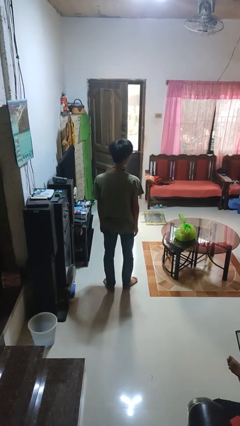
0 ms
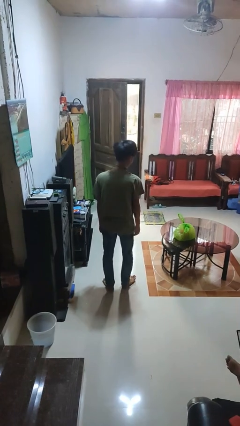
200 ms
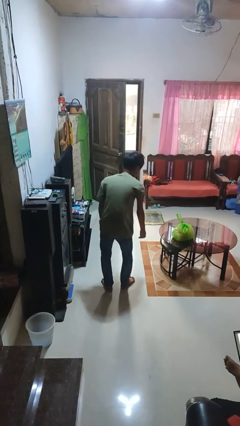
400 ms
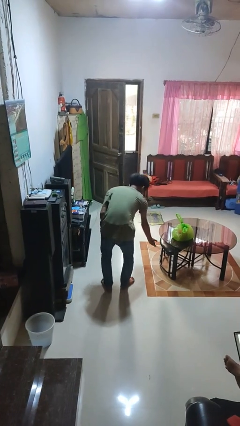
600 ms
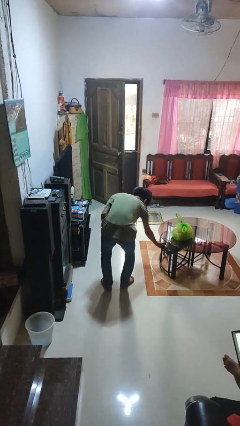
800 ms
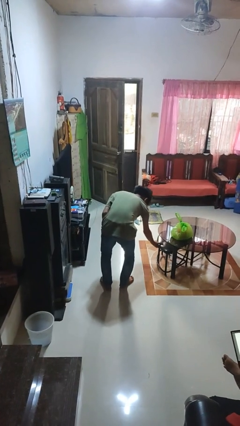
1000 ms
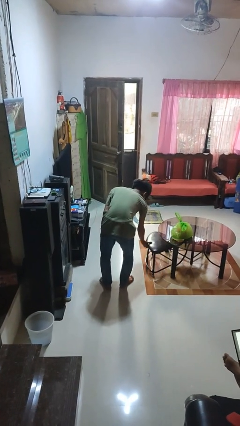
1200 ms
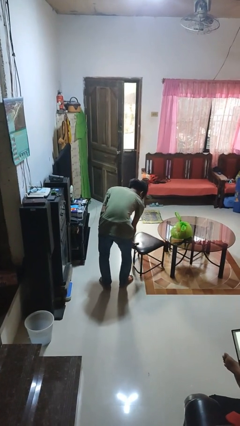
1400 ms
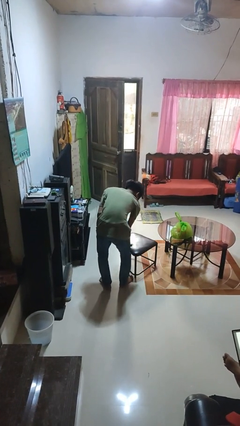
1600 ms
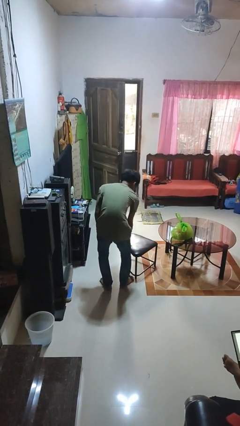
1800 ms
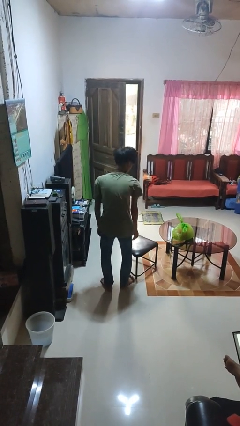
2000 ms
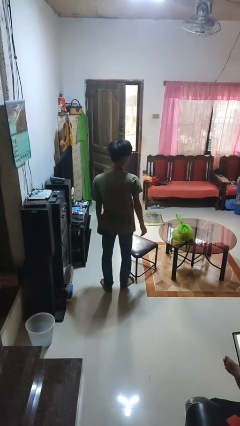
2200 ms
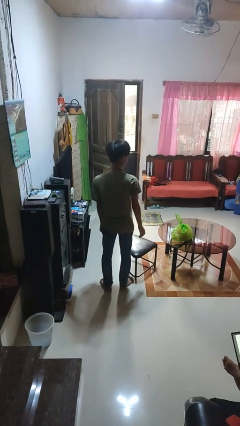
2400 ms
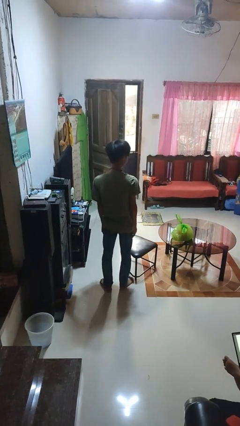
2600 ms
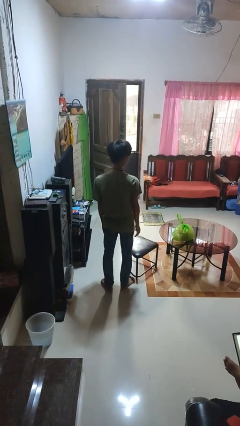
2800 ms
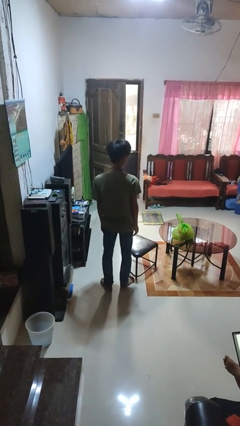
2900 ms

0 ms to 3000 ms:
person pulls out chair

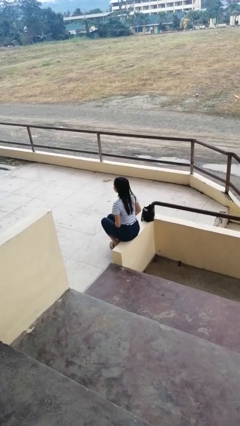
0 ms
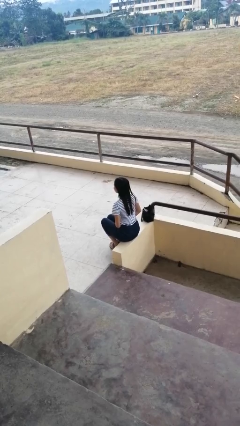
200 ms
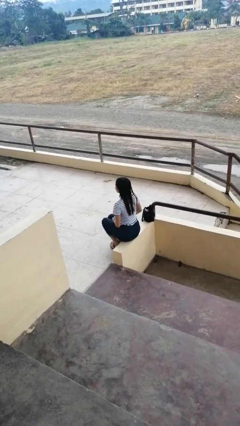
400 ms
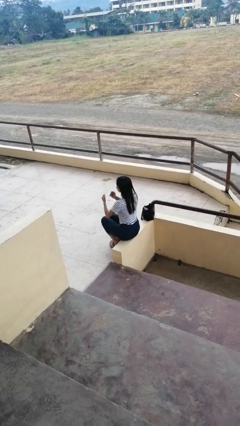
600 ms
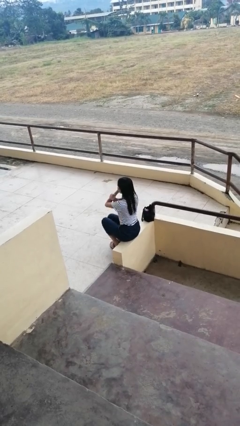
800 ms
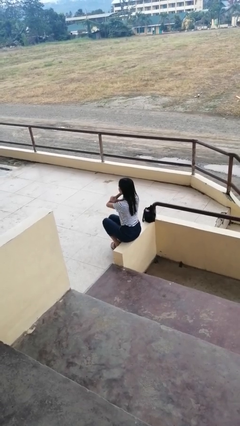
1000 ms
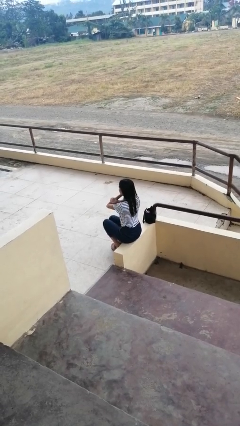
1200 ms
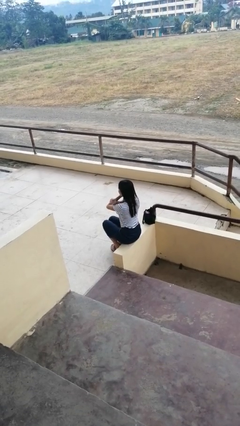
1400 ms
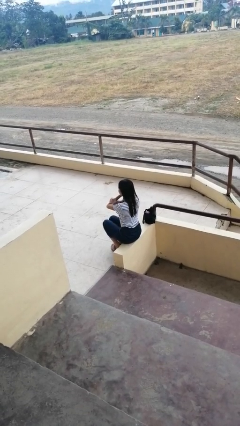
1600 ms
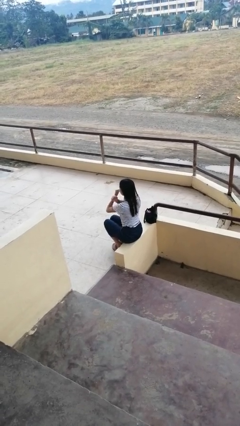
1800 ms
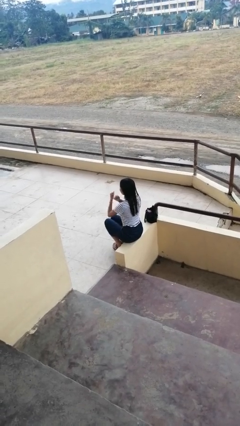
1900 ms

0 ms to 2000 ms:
person gestures arms x

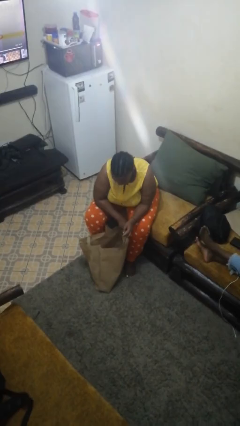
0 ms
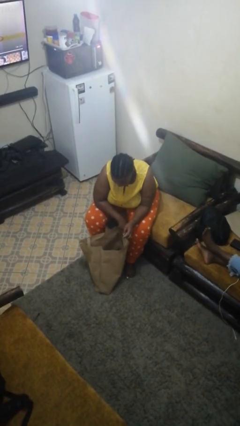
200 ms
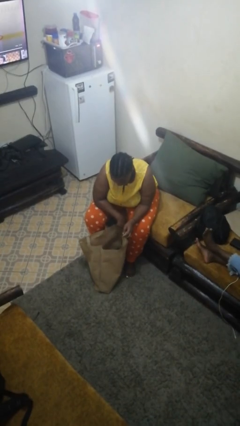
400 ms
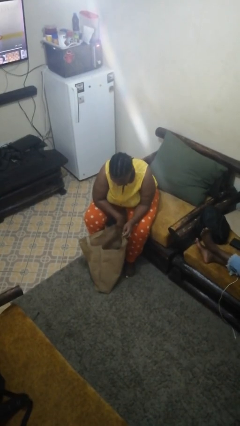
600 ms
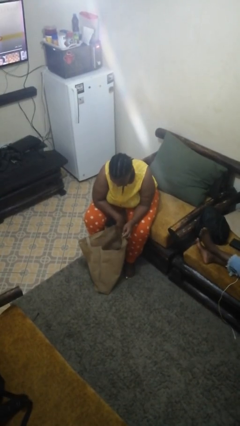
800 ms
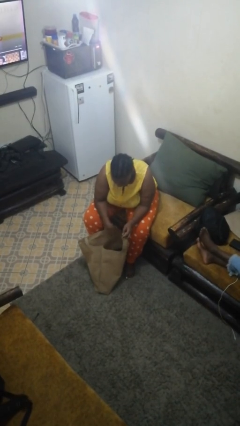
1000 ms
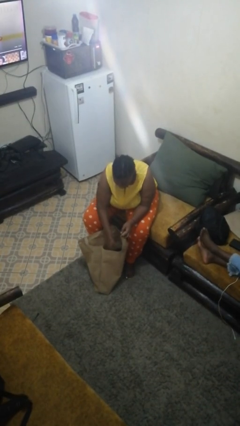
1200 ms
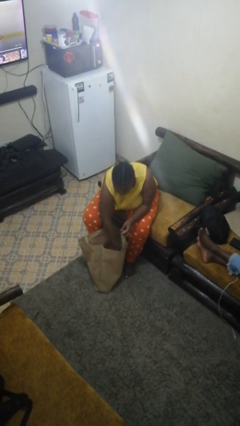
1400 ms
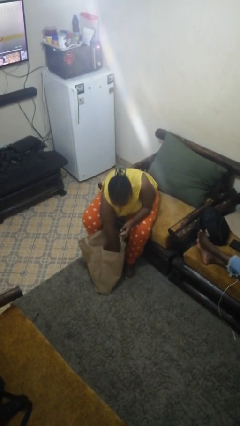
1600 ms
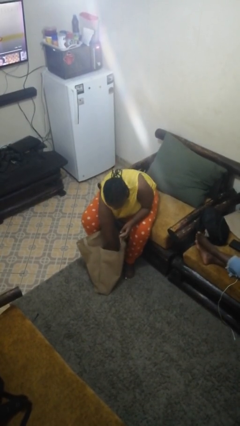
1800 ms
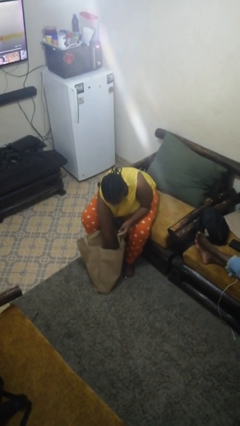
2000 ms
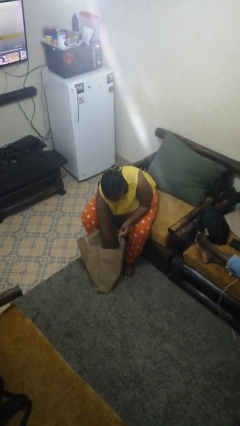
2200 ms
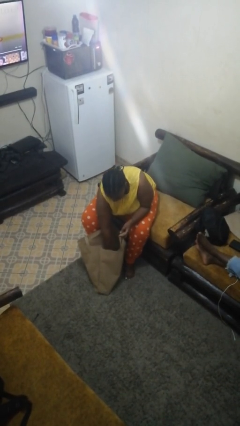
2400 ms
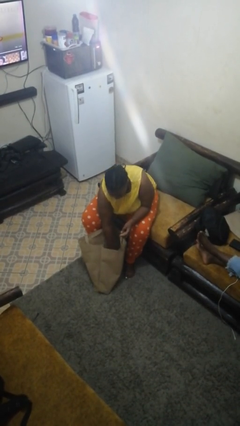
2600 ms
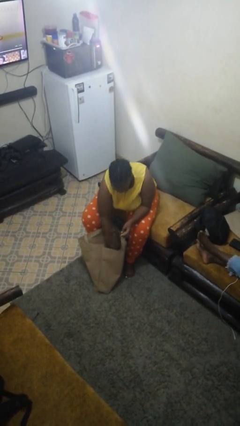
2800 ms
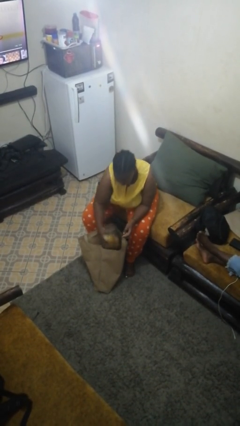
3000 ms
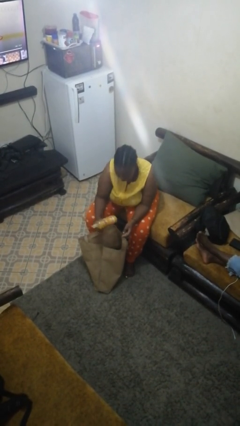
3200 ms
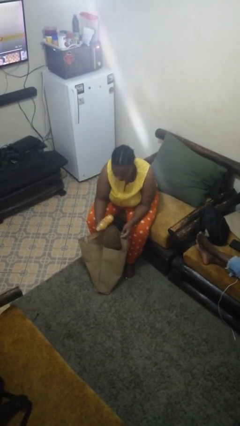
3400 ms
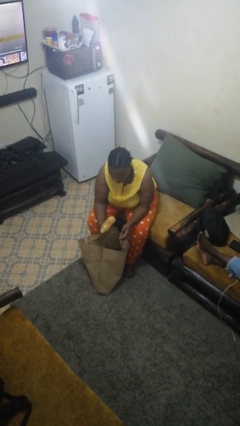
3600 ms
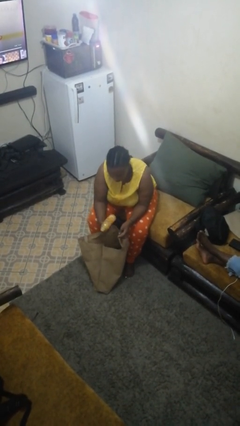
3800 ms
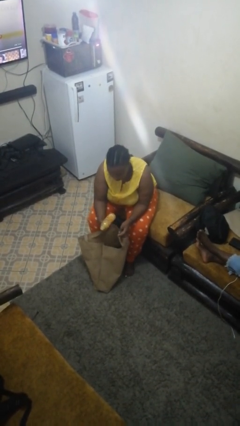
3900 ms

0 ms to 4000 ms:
person takes object from bag

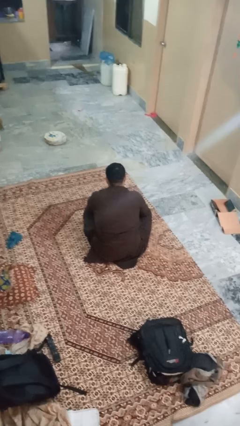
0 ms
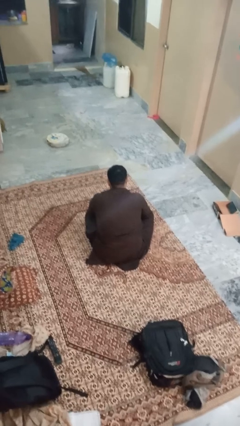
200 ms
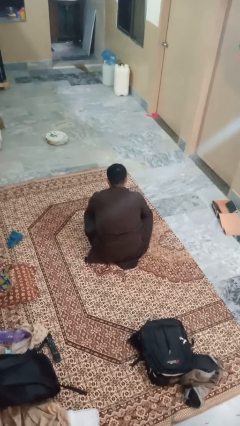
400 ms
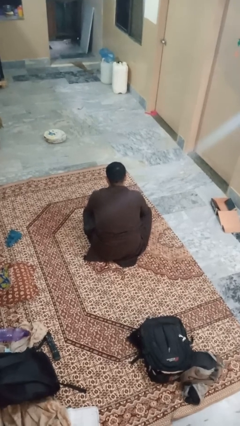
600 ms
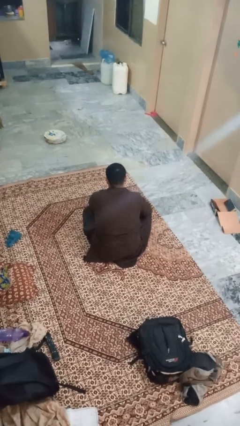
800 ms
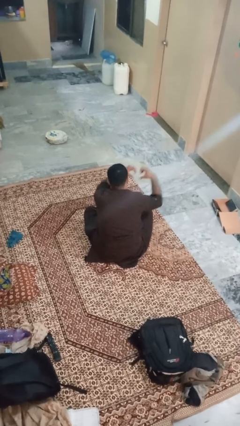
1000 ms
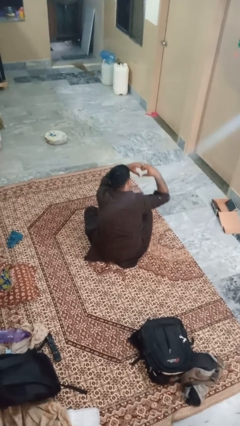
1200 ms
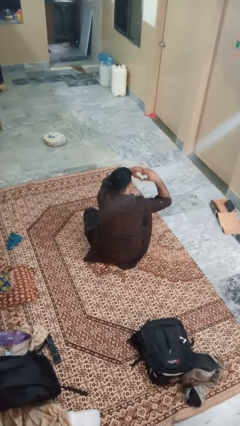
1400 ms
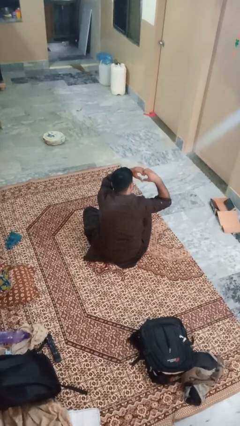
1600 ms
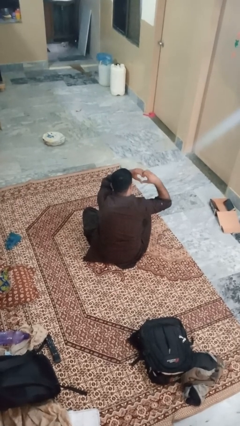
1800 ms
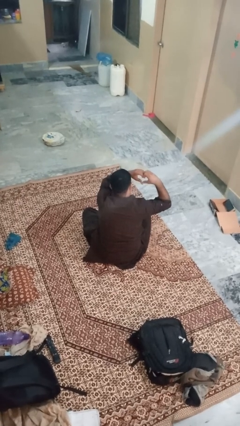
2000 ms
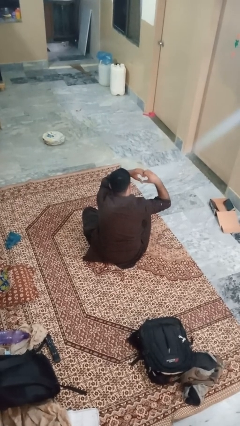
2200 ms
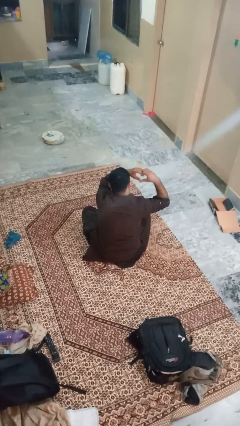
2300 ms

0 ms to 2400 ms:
person gestures heart

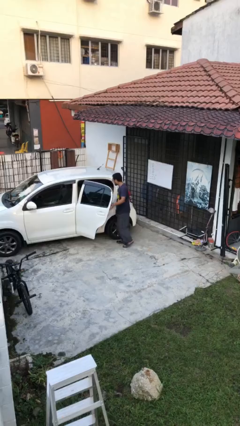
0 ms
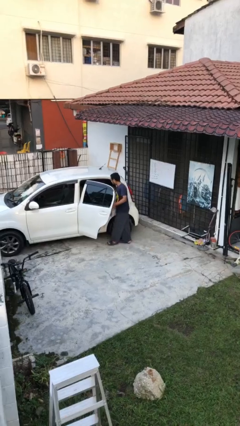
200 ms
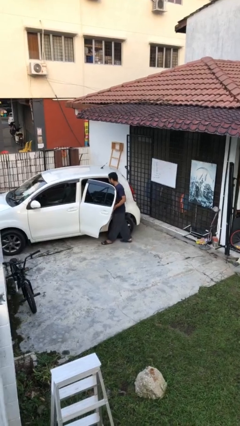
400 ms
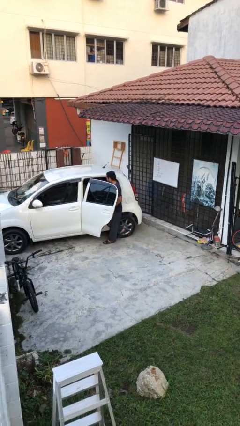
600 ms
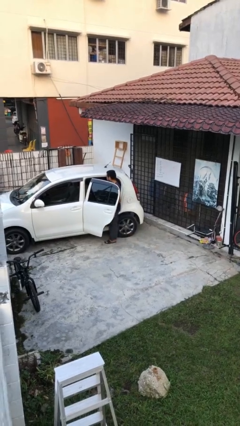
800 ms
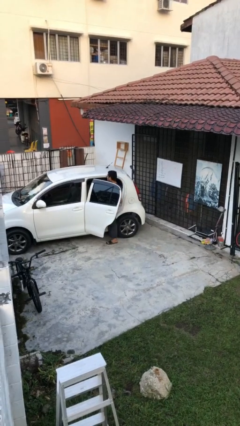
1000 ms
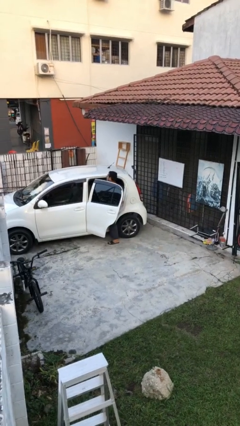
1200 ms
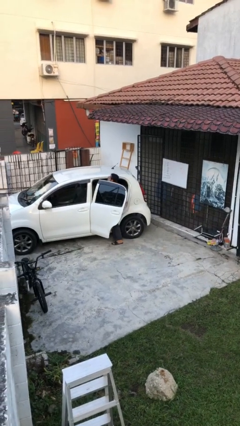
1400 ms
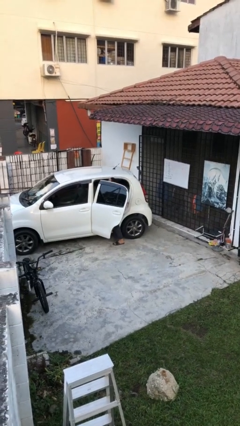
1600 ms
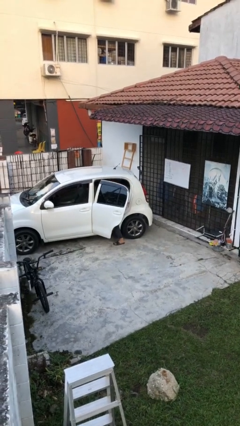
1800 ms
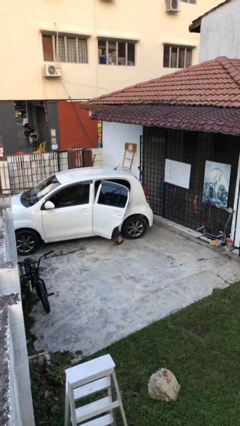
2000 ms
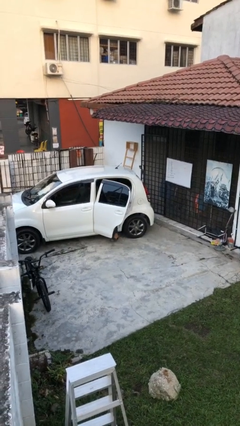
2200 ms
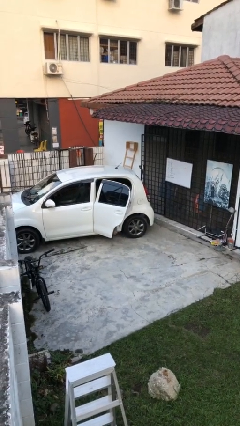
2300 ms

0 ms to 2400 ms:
person enters car

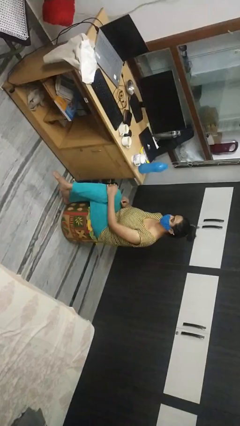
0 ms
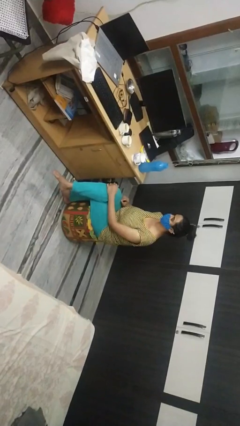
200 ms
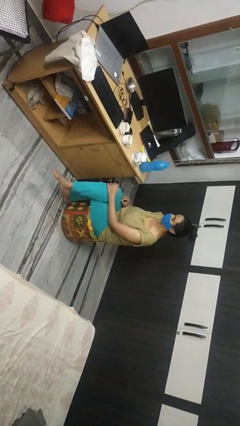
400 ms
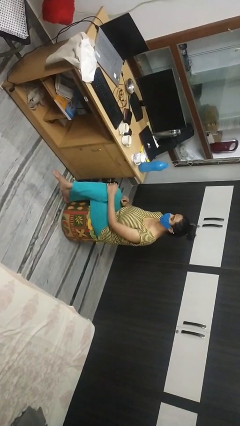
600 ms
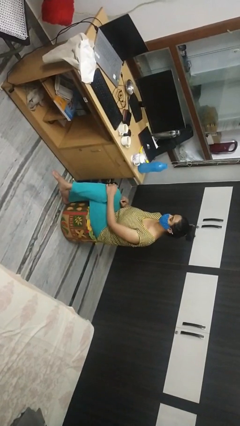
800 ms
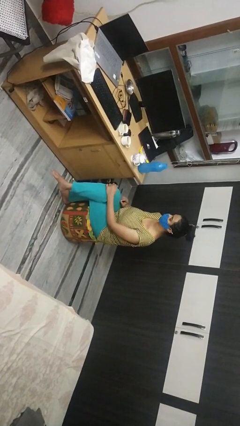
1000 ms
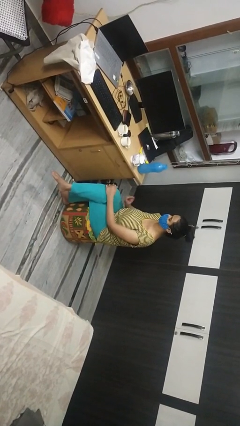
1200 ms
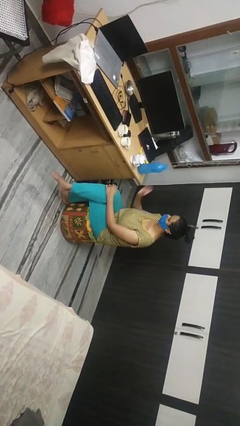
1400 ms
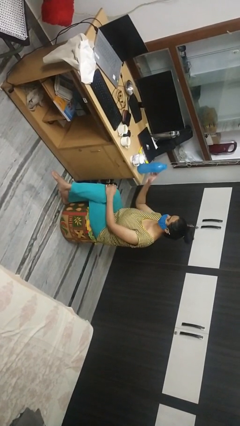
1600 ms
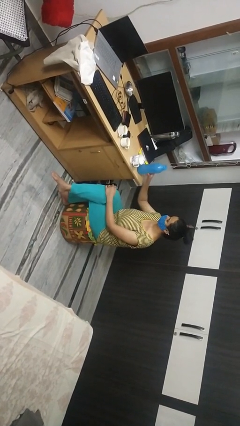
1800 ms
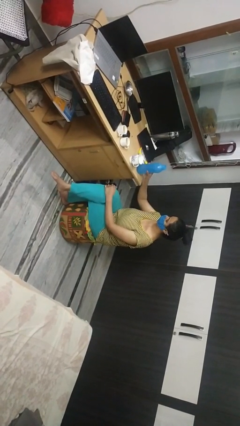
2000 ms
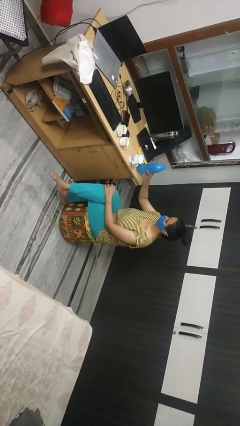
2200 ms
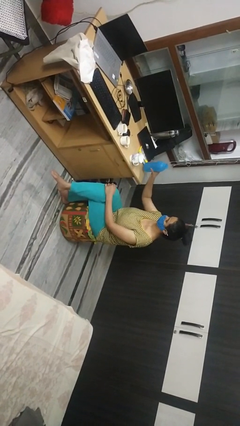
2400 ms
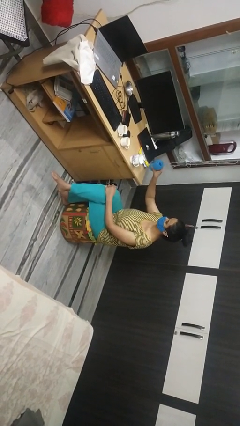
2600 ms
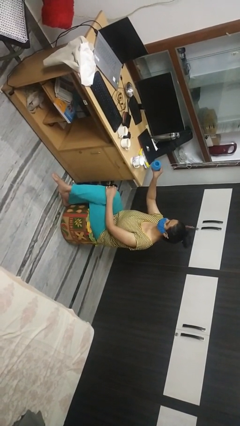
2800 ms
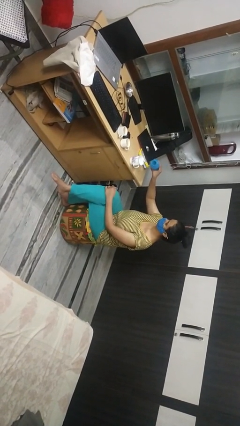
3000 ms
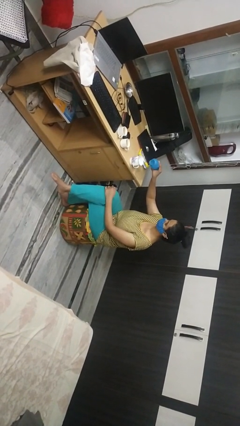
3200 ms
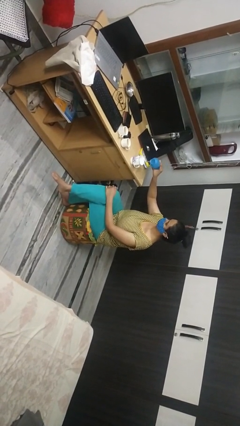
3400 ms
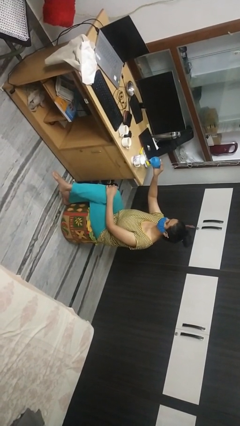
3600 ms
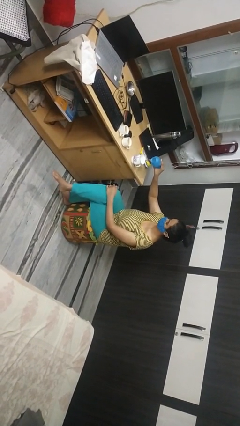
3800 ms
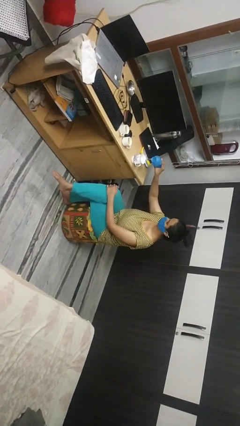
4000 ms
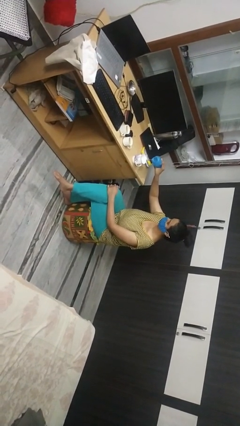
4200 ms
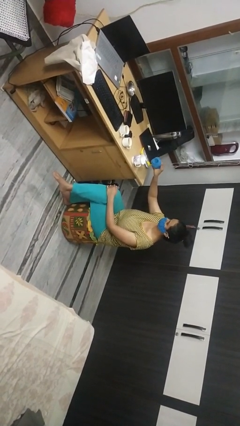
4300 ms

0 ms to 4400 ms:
person pours liquid into cup
